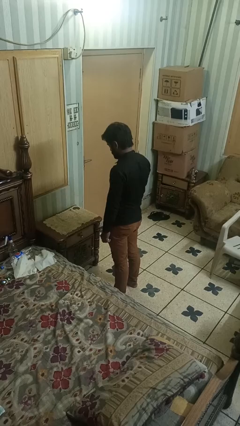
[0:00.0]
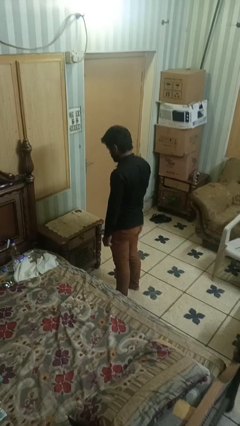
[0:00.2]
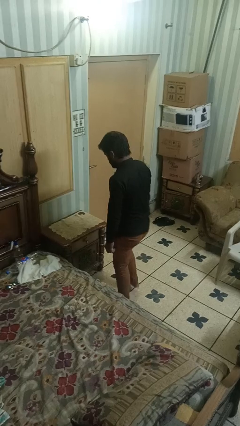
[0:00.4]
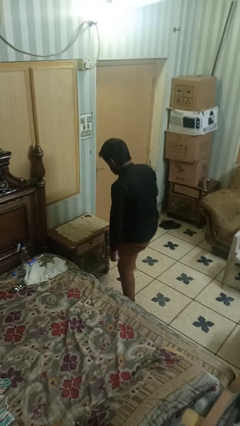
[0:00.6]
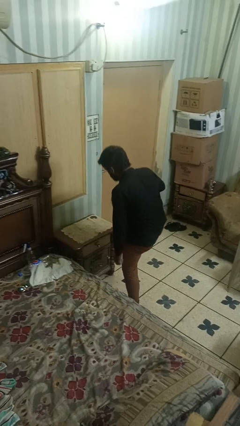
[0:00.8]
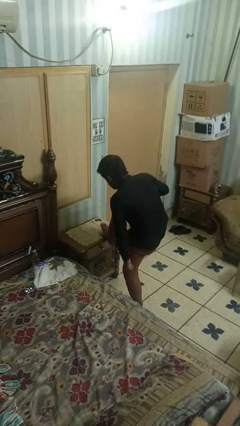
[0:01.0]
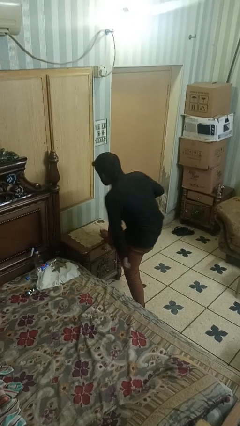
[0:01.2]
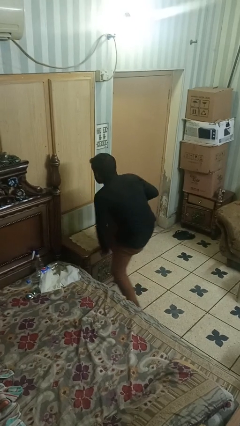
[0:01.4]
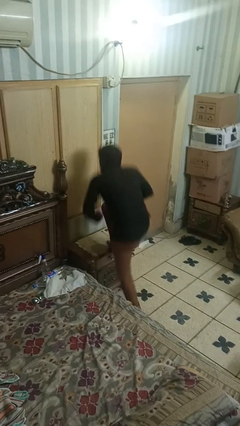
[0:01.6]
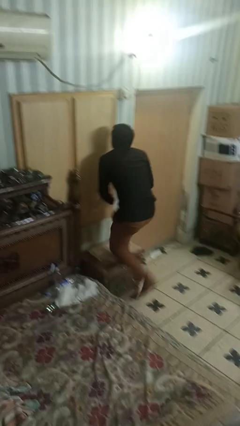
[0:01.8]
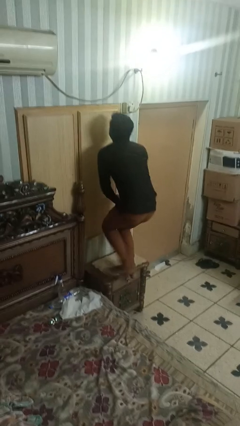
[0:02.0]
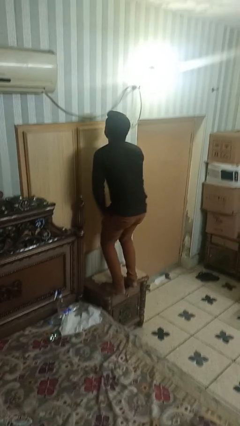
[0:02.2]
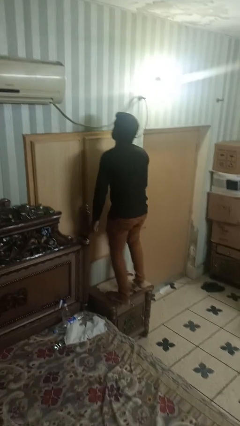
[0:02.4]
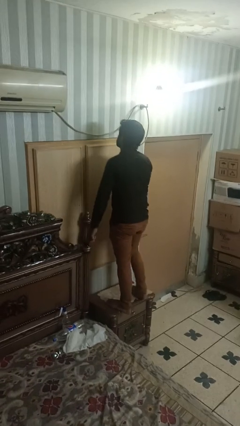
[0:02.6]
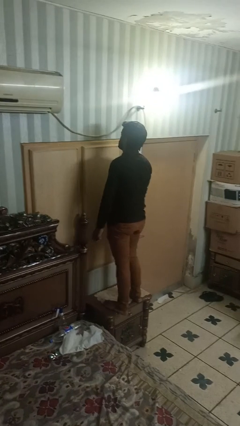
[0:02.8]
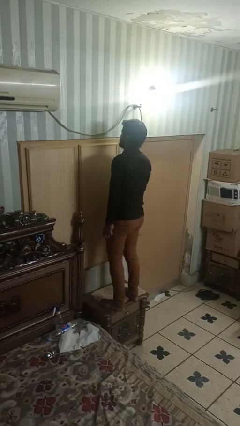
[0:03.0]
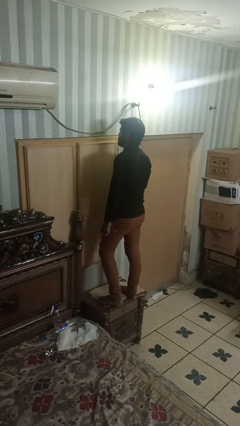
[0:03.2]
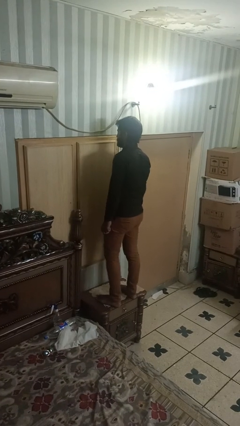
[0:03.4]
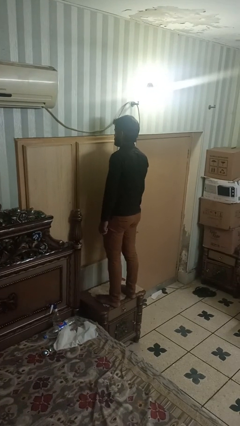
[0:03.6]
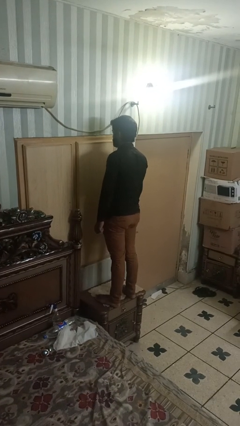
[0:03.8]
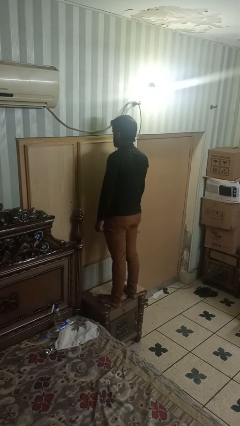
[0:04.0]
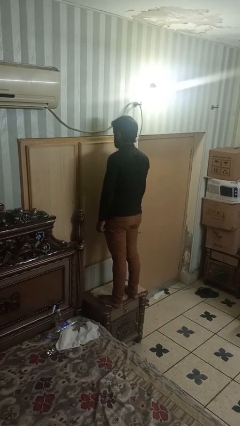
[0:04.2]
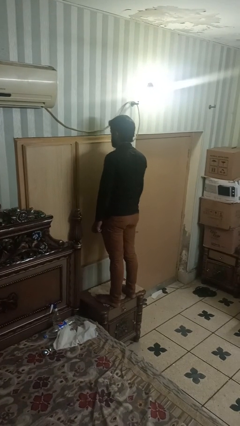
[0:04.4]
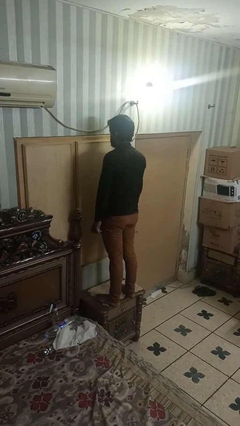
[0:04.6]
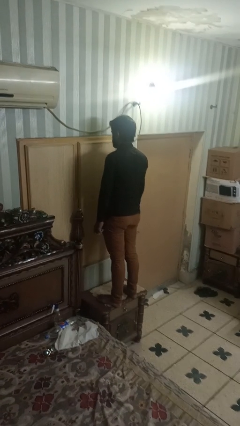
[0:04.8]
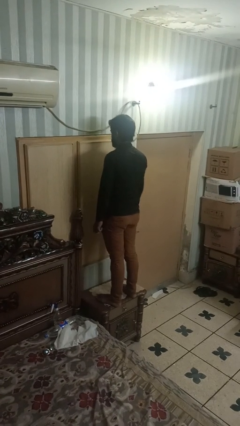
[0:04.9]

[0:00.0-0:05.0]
person climbs on table

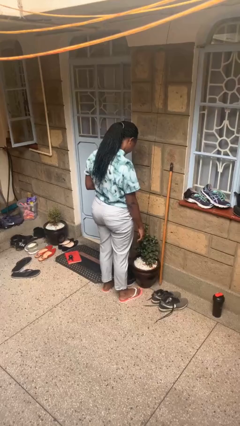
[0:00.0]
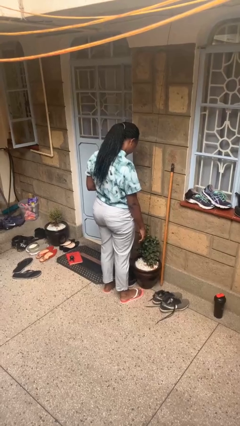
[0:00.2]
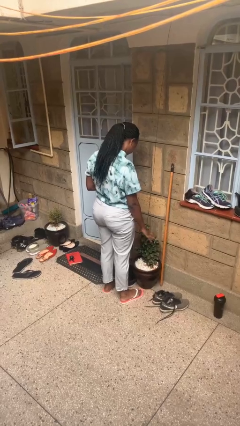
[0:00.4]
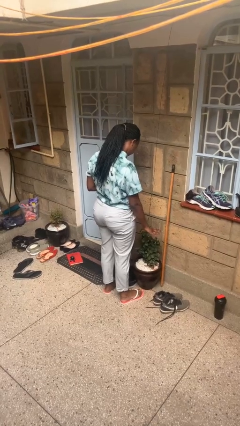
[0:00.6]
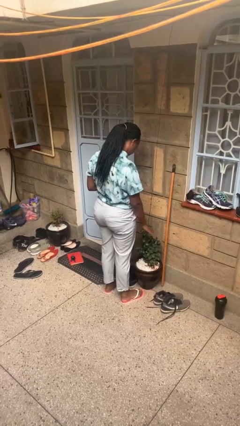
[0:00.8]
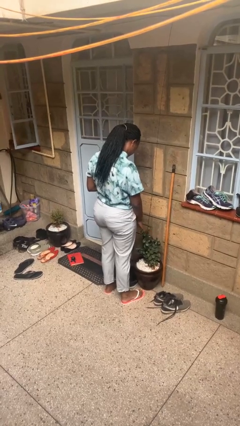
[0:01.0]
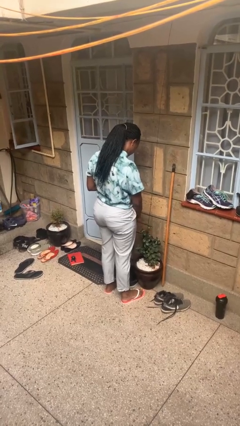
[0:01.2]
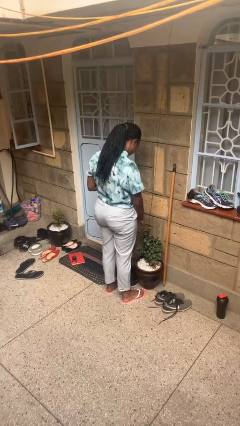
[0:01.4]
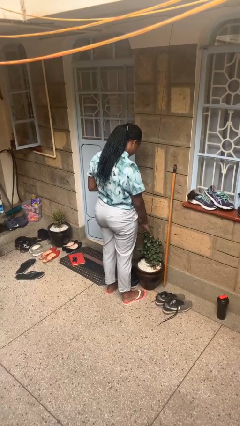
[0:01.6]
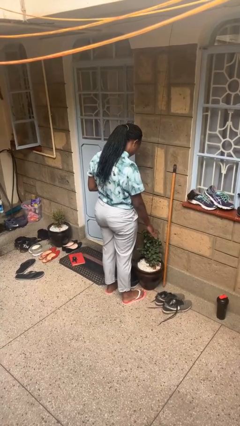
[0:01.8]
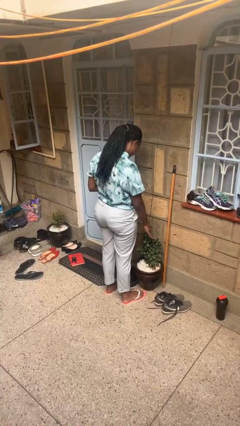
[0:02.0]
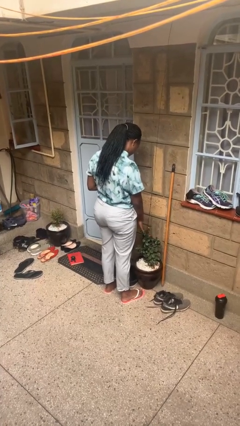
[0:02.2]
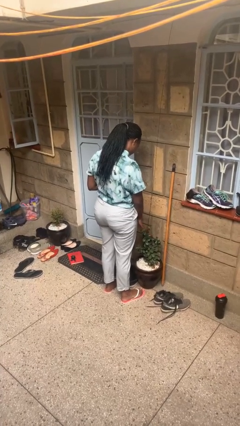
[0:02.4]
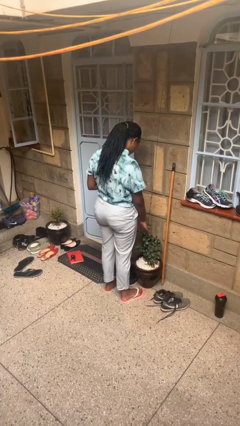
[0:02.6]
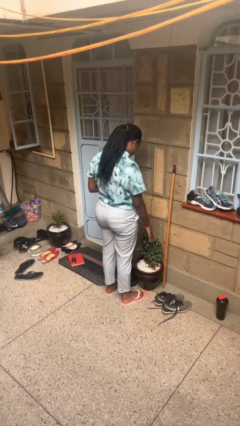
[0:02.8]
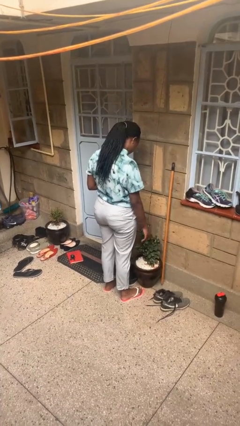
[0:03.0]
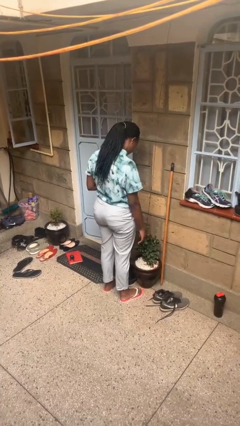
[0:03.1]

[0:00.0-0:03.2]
person waves hand over object

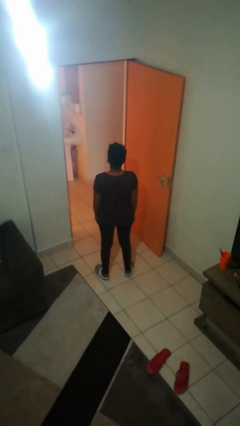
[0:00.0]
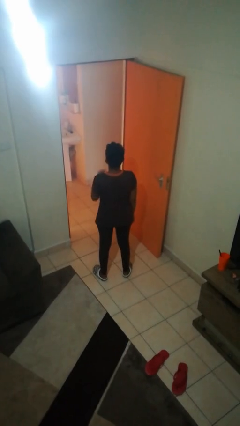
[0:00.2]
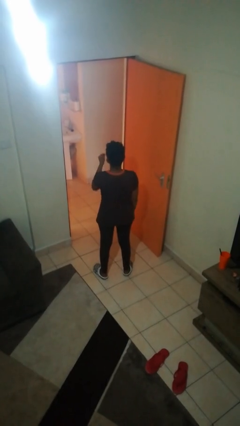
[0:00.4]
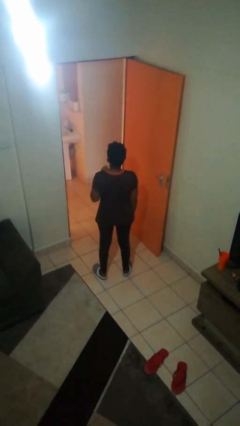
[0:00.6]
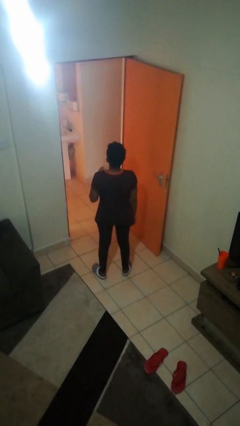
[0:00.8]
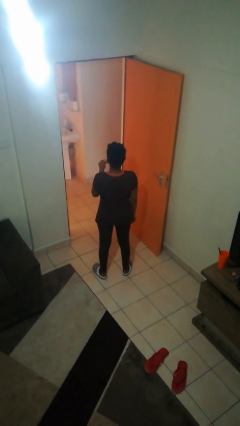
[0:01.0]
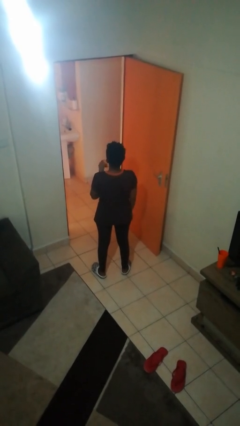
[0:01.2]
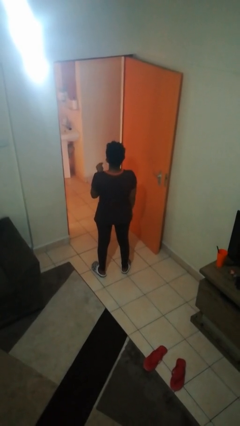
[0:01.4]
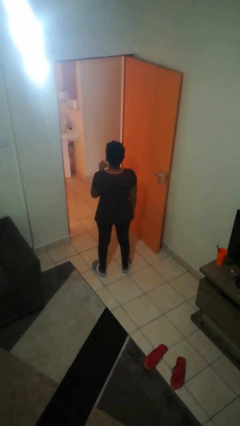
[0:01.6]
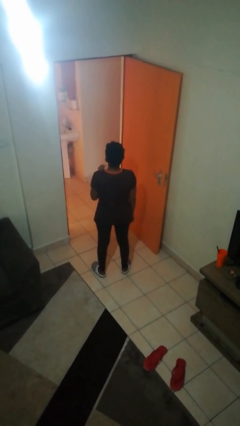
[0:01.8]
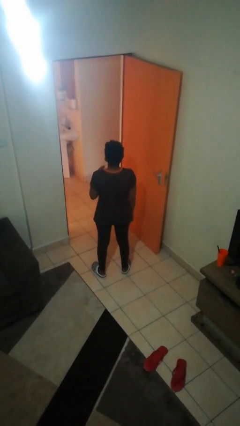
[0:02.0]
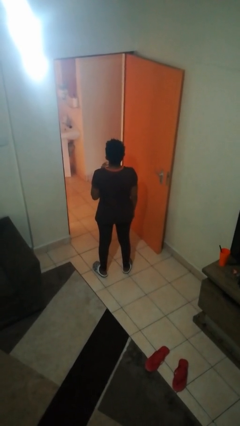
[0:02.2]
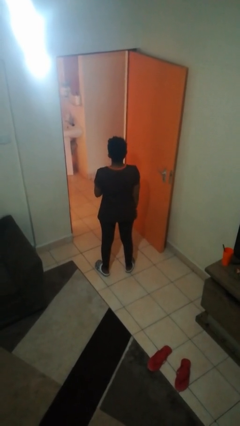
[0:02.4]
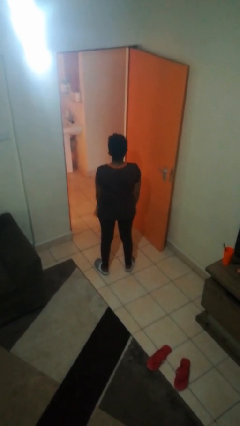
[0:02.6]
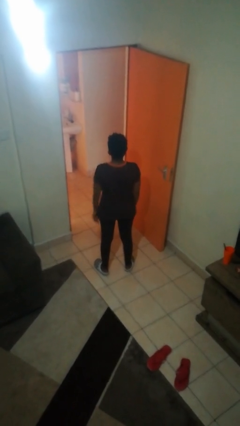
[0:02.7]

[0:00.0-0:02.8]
person snaps fingers

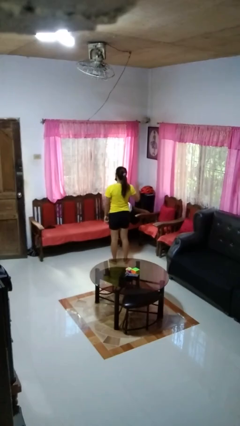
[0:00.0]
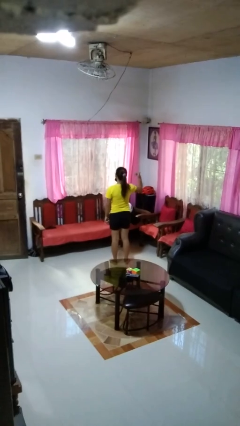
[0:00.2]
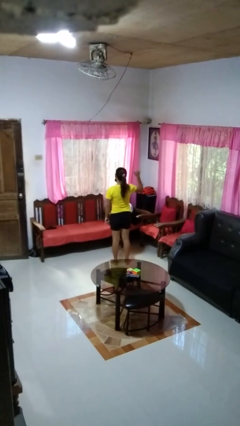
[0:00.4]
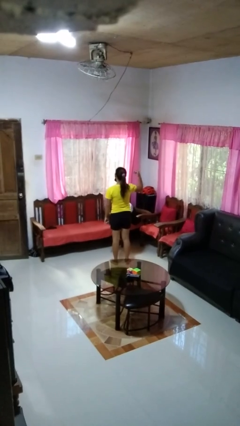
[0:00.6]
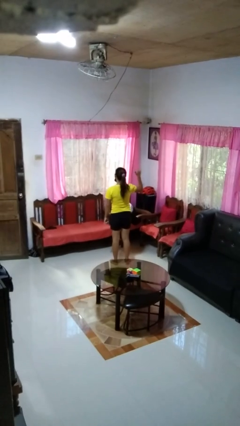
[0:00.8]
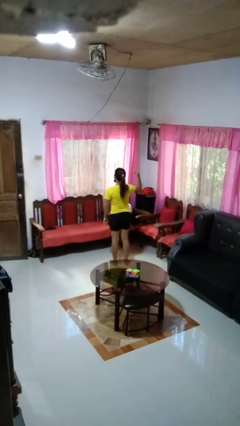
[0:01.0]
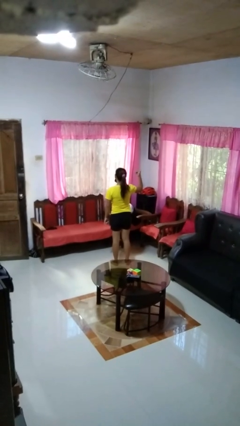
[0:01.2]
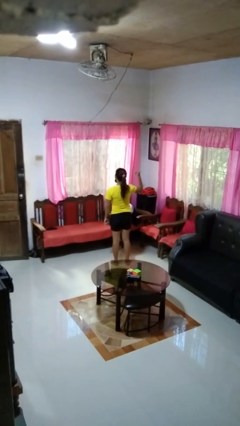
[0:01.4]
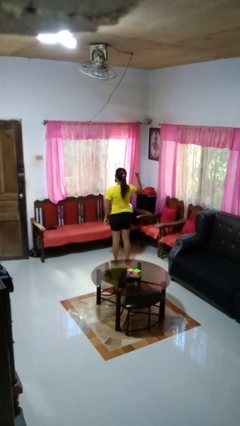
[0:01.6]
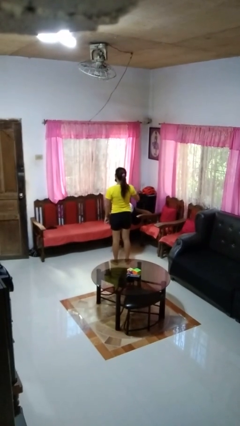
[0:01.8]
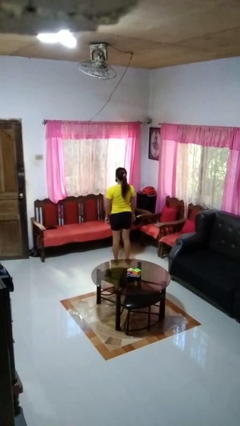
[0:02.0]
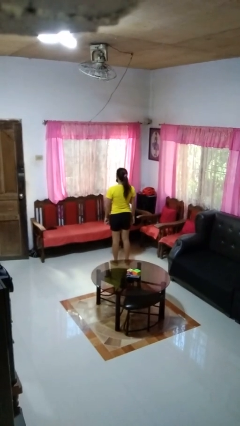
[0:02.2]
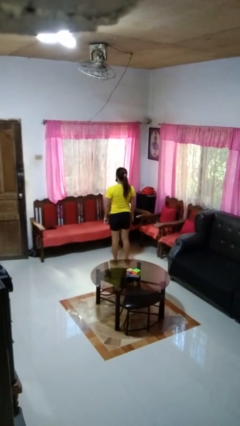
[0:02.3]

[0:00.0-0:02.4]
person gestures hang loose

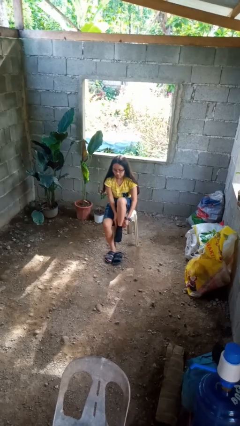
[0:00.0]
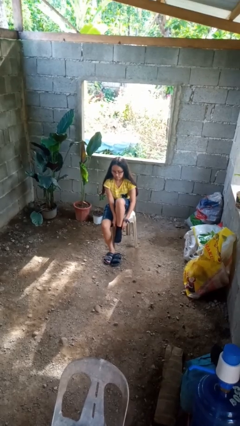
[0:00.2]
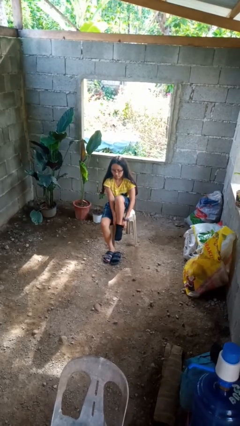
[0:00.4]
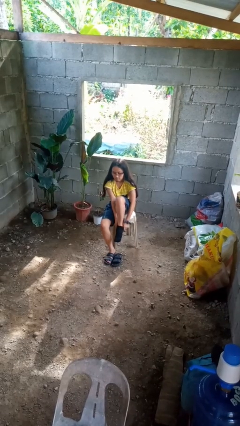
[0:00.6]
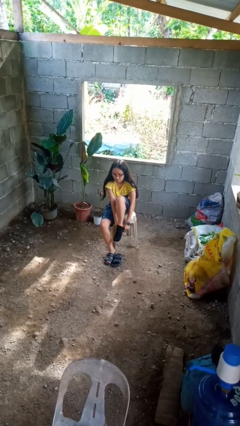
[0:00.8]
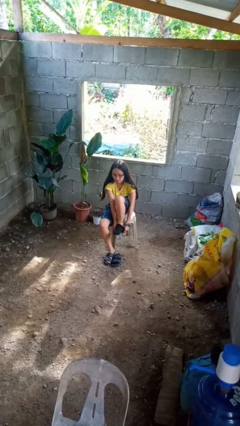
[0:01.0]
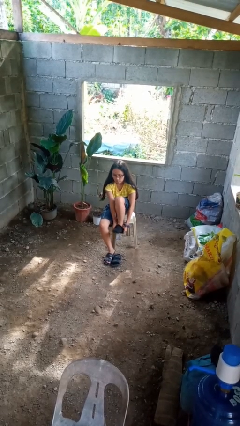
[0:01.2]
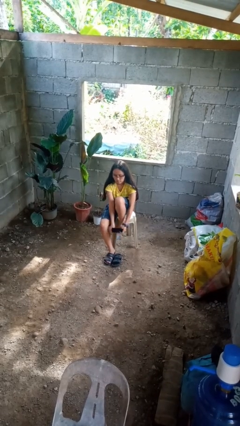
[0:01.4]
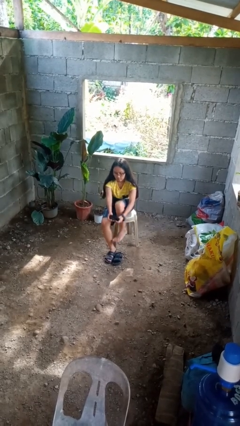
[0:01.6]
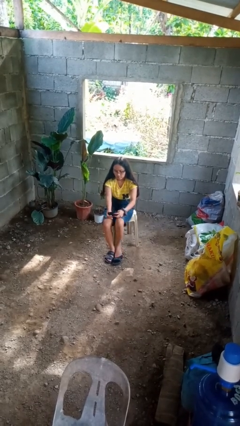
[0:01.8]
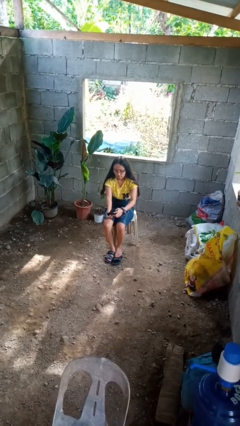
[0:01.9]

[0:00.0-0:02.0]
person takes off socks

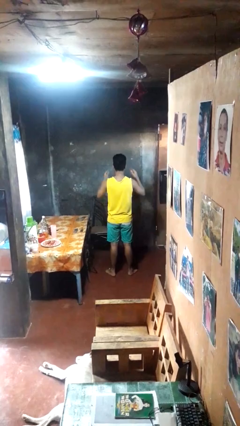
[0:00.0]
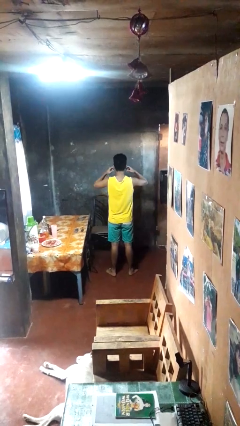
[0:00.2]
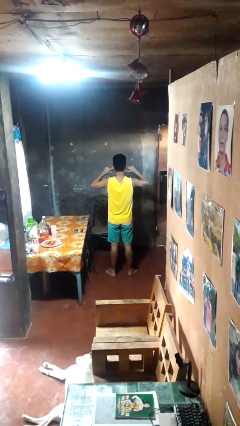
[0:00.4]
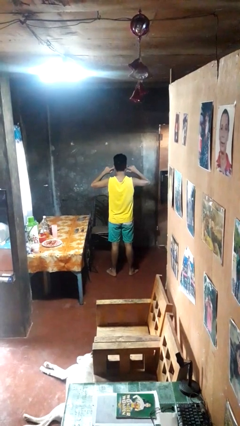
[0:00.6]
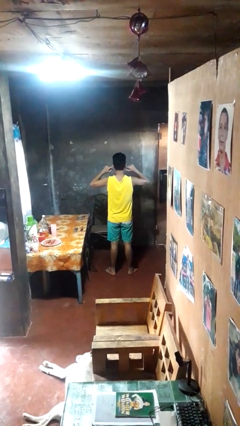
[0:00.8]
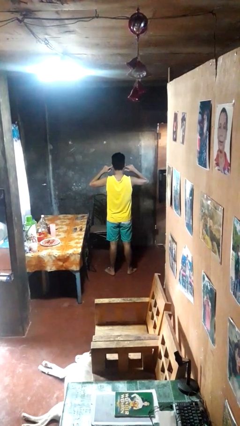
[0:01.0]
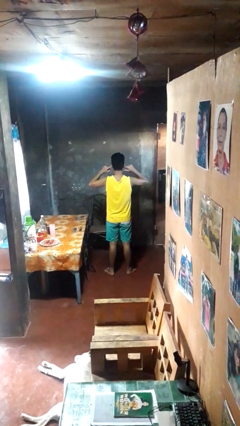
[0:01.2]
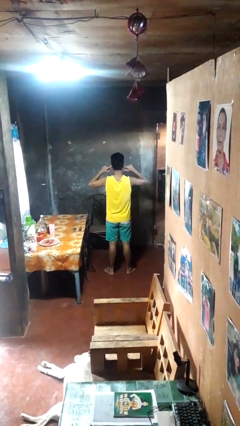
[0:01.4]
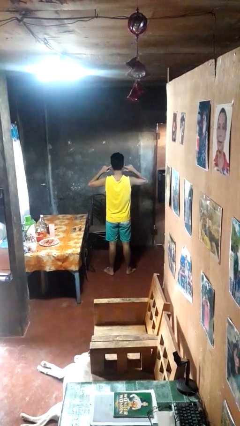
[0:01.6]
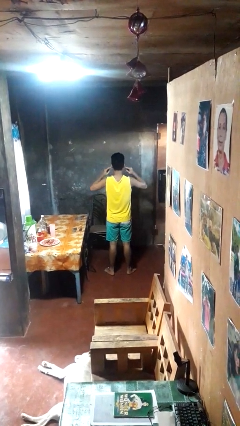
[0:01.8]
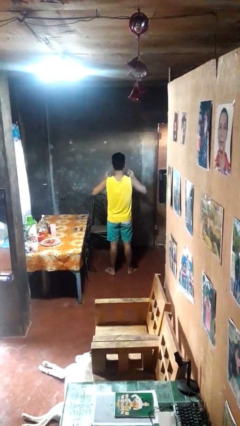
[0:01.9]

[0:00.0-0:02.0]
person puts fingers in ear
